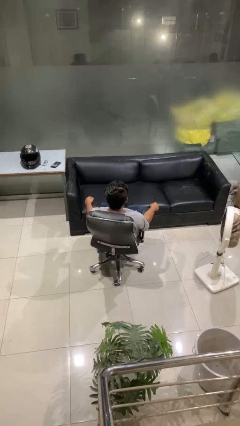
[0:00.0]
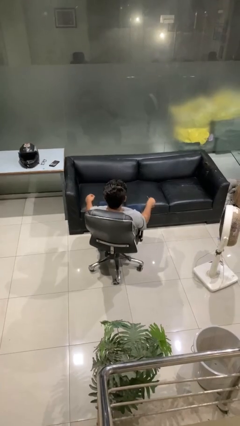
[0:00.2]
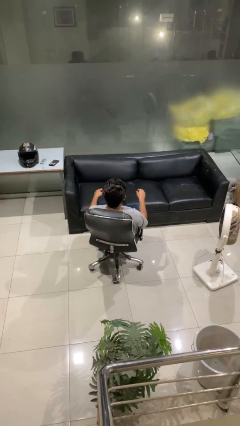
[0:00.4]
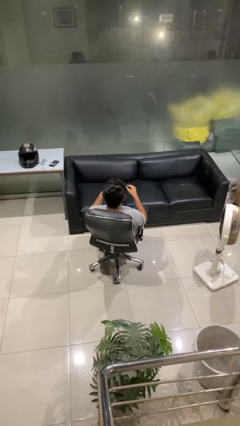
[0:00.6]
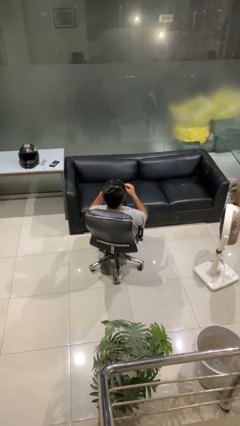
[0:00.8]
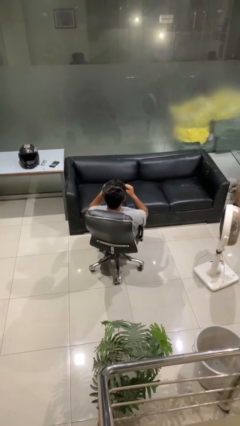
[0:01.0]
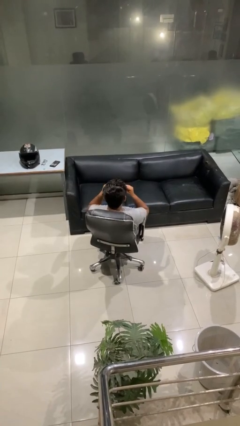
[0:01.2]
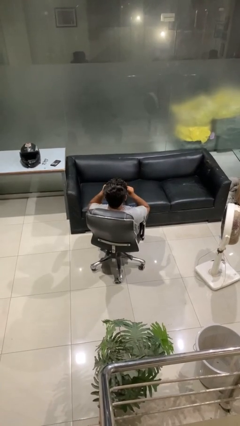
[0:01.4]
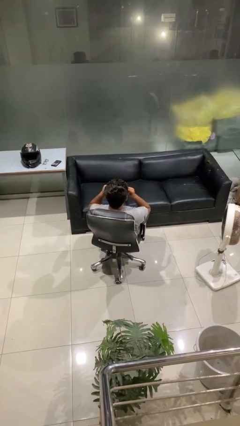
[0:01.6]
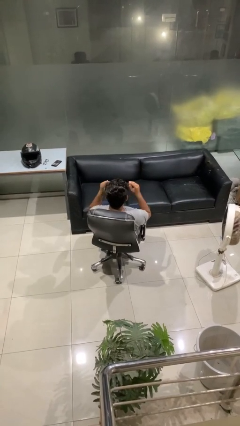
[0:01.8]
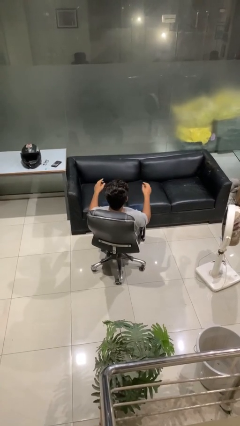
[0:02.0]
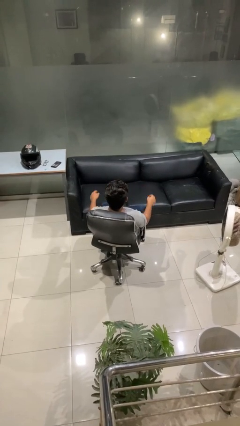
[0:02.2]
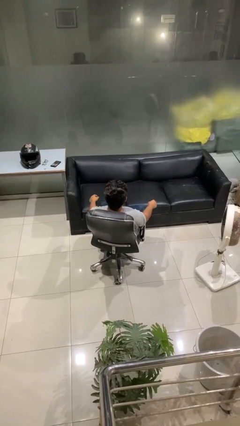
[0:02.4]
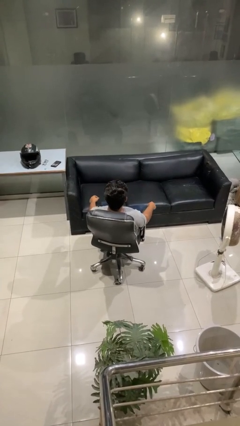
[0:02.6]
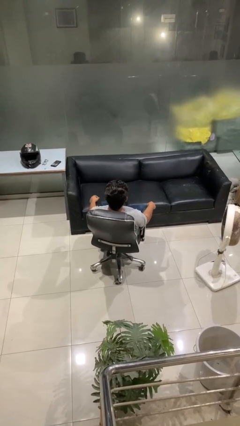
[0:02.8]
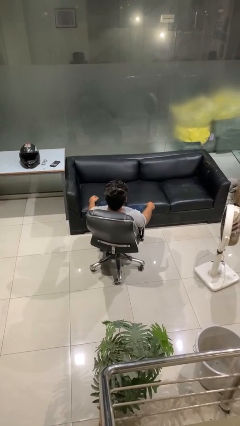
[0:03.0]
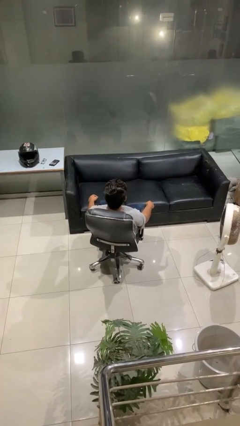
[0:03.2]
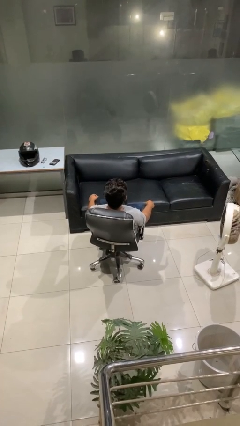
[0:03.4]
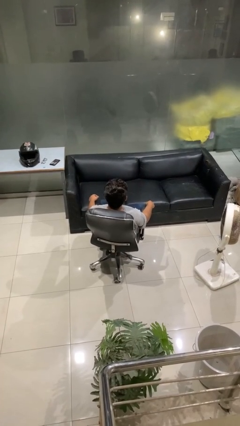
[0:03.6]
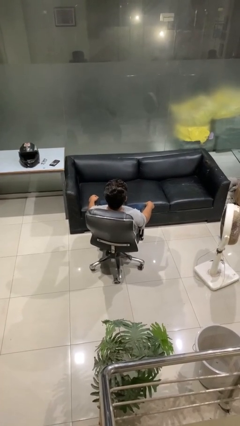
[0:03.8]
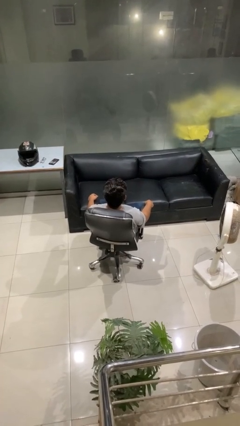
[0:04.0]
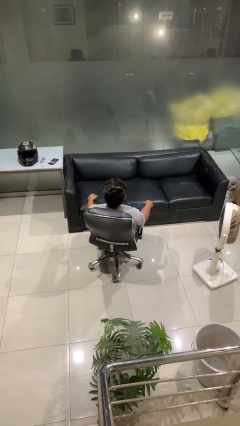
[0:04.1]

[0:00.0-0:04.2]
person puts on sunglasses

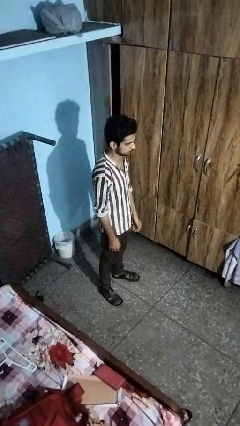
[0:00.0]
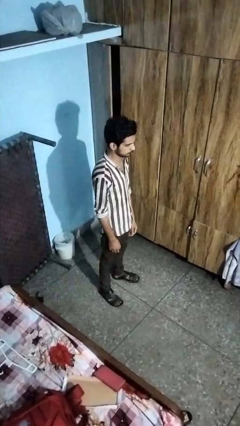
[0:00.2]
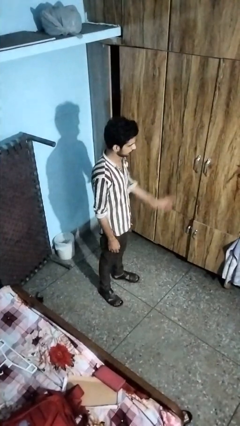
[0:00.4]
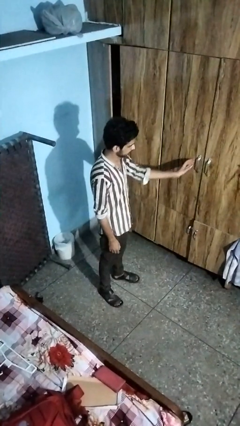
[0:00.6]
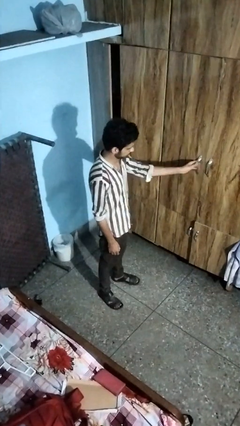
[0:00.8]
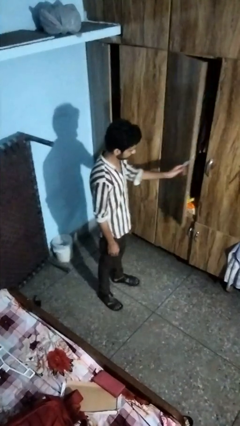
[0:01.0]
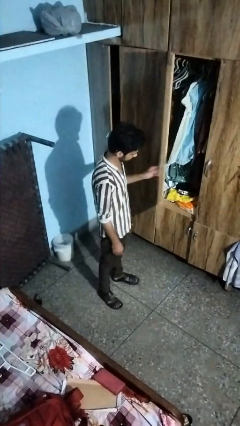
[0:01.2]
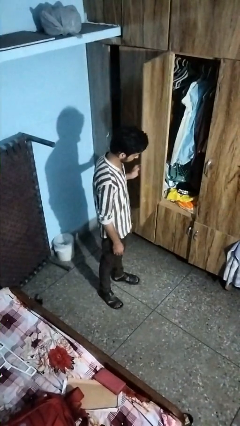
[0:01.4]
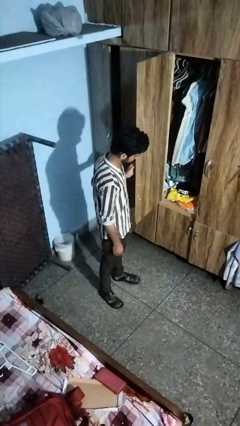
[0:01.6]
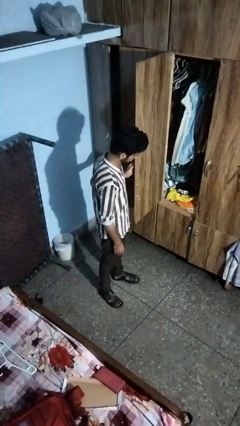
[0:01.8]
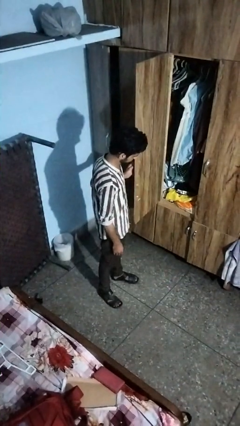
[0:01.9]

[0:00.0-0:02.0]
person opens closet door

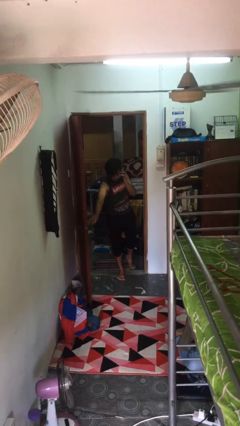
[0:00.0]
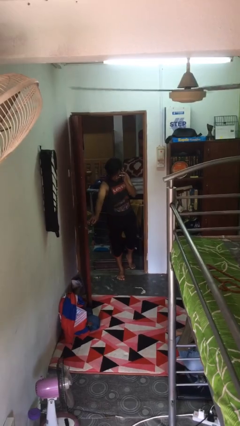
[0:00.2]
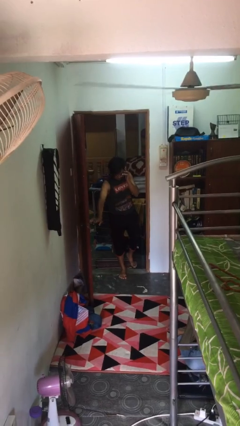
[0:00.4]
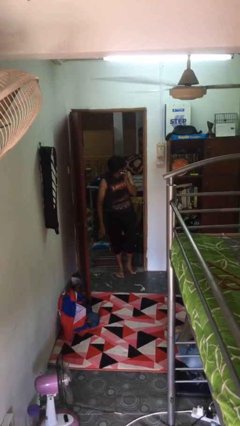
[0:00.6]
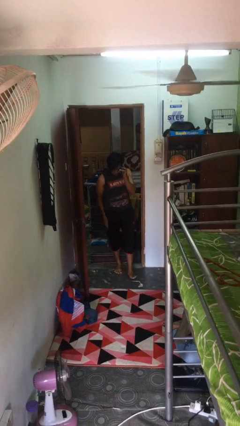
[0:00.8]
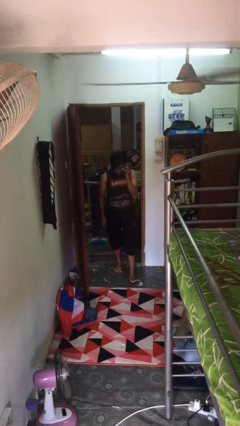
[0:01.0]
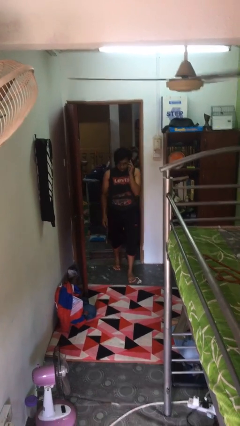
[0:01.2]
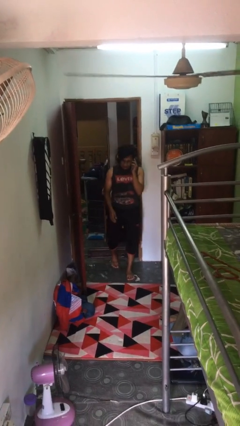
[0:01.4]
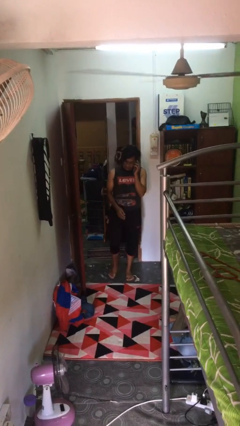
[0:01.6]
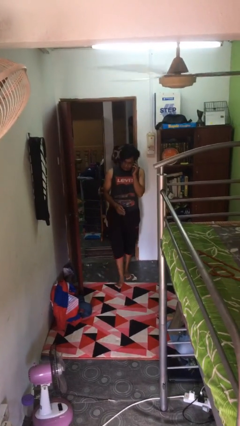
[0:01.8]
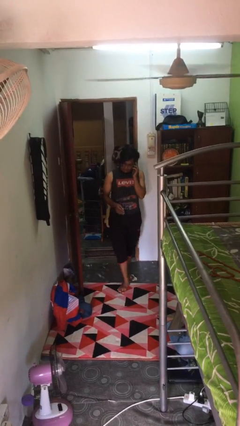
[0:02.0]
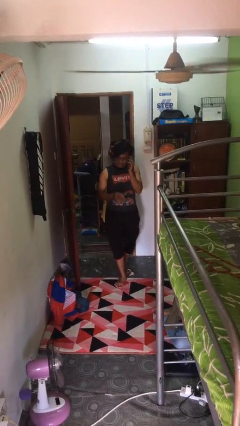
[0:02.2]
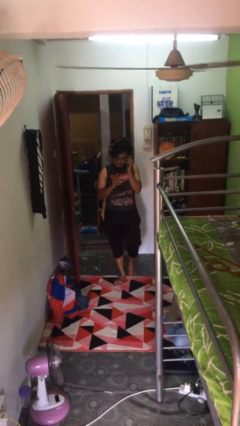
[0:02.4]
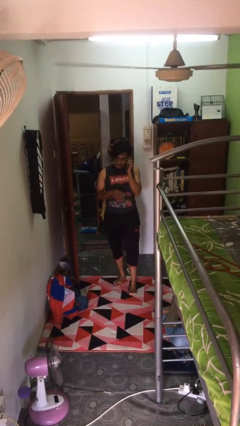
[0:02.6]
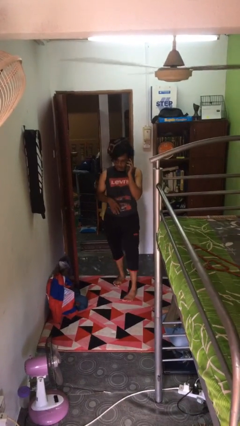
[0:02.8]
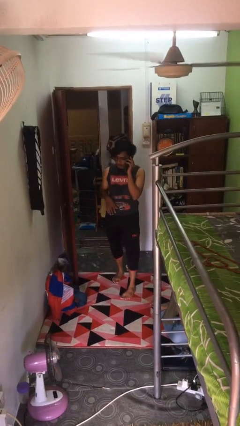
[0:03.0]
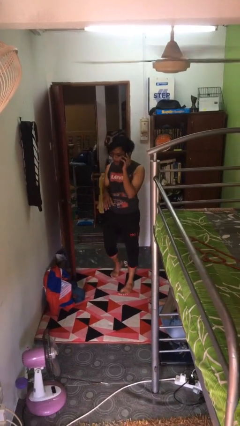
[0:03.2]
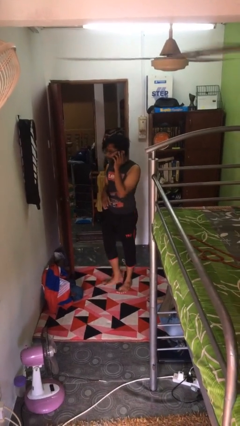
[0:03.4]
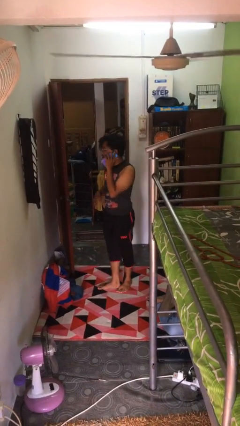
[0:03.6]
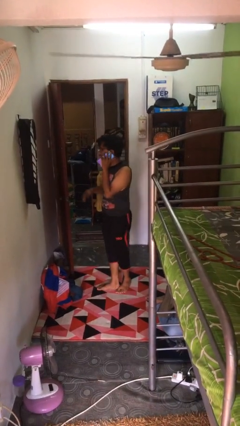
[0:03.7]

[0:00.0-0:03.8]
person enters scene through structure

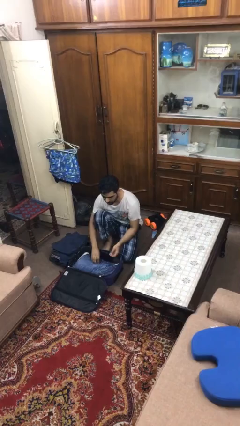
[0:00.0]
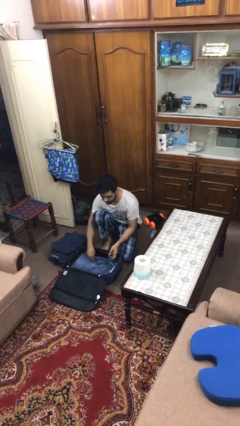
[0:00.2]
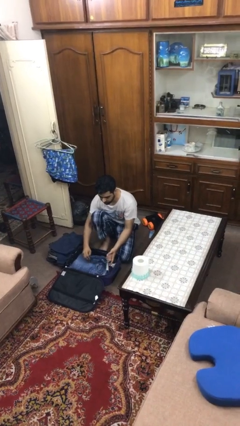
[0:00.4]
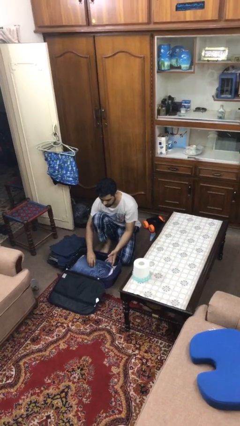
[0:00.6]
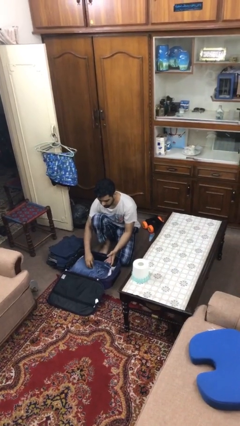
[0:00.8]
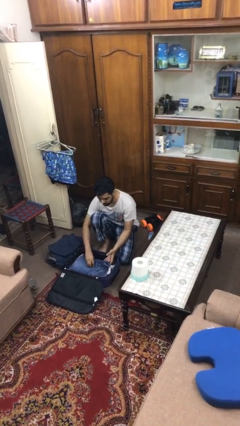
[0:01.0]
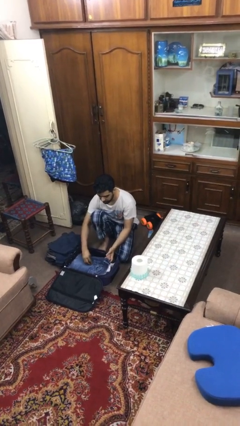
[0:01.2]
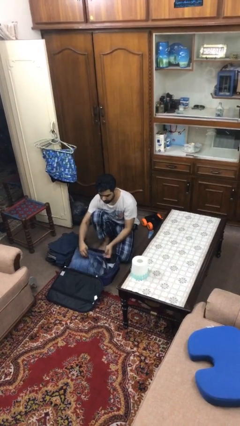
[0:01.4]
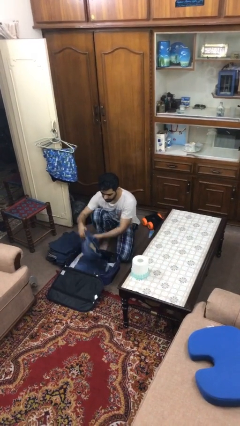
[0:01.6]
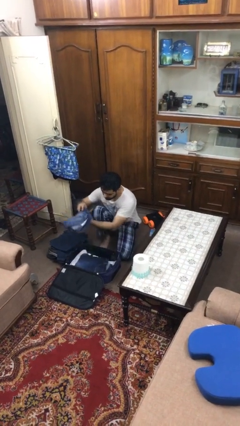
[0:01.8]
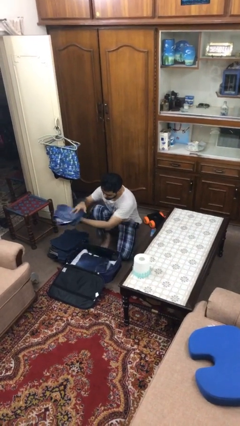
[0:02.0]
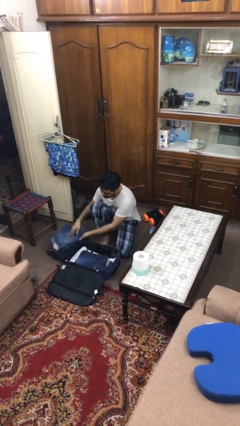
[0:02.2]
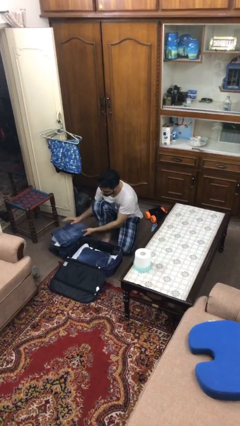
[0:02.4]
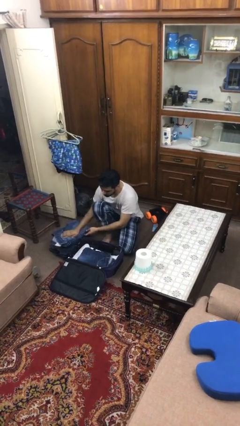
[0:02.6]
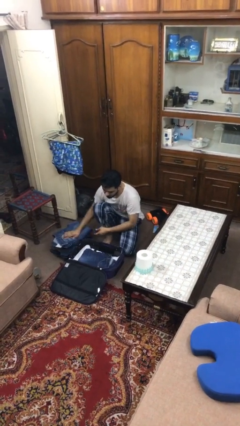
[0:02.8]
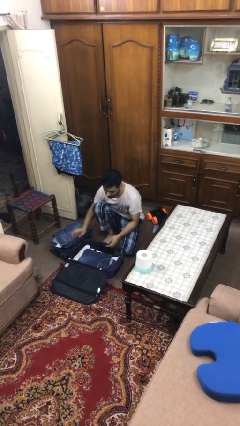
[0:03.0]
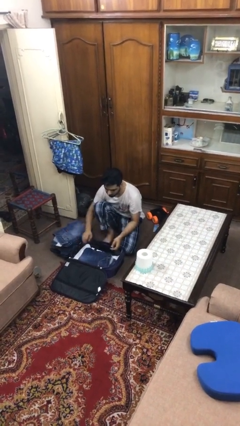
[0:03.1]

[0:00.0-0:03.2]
person unloads clothes from suitcase

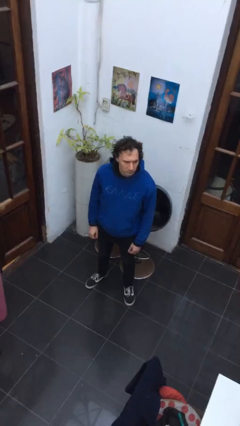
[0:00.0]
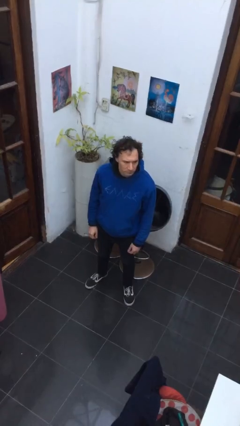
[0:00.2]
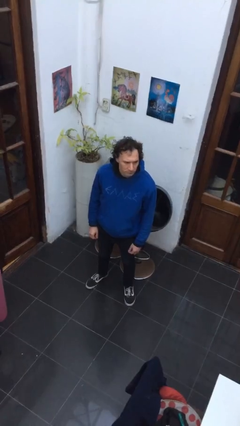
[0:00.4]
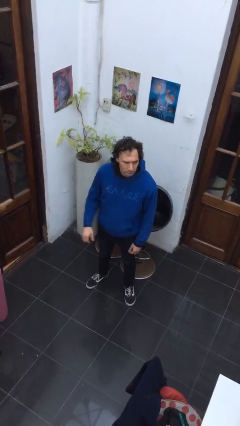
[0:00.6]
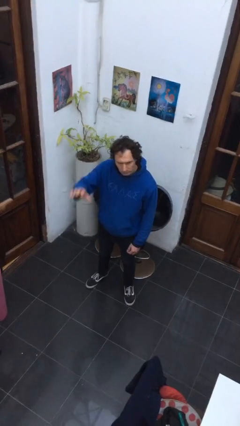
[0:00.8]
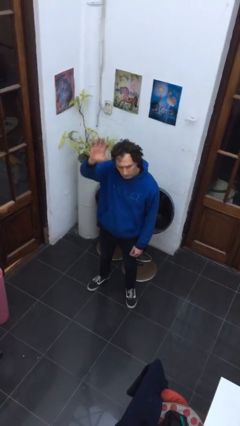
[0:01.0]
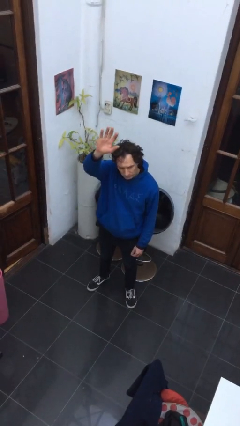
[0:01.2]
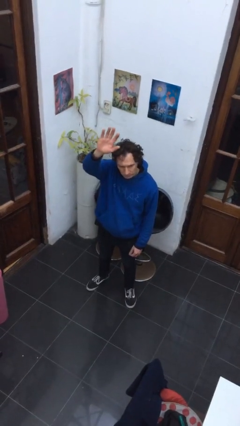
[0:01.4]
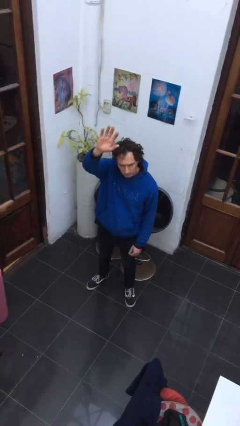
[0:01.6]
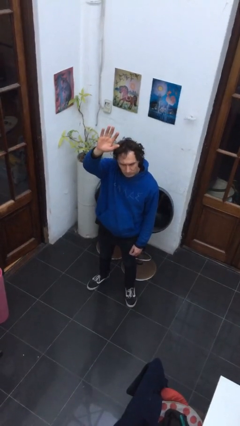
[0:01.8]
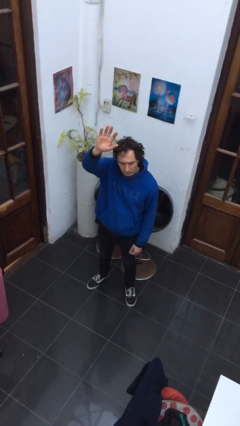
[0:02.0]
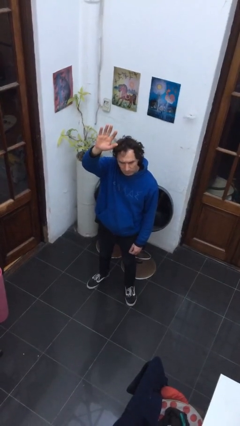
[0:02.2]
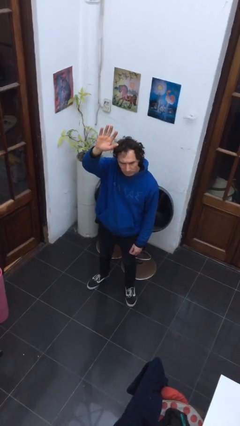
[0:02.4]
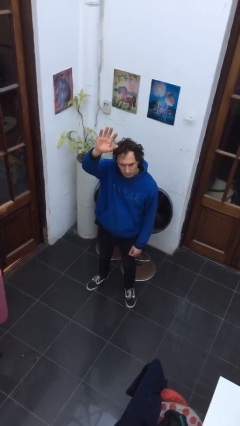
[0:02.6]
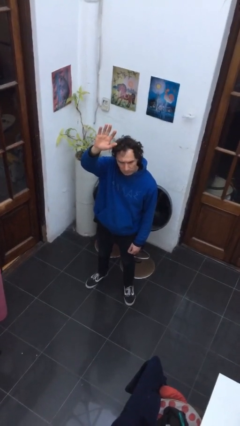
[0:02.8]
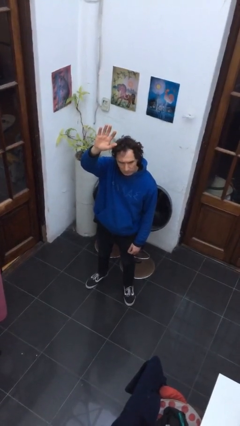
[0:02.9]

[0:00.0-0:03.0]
person gestures raise hand

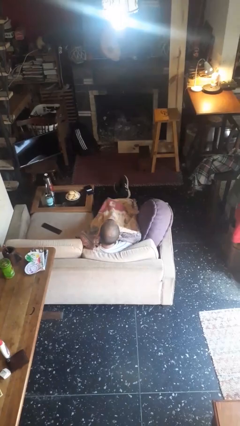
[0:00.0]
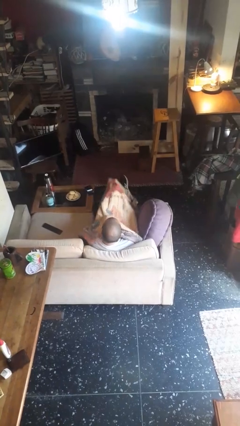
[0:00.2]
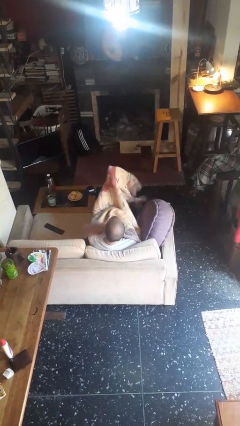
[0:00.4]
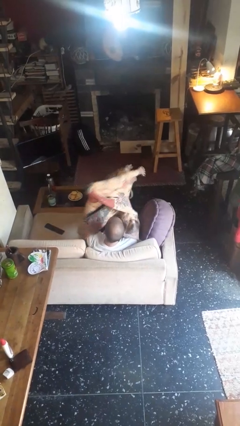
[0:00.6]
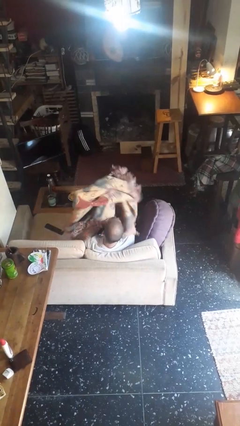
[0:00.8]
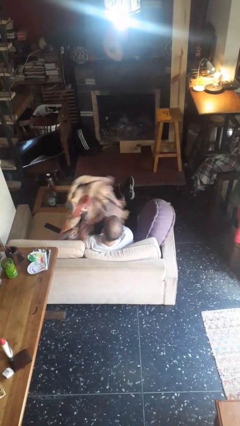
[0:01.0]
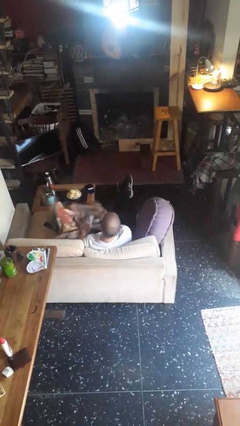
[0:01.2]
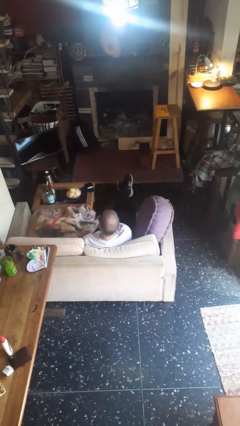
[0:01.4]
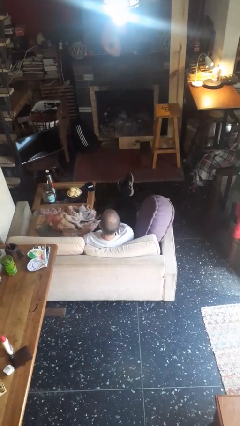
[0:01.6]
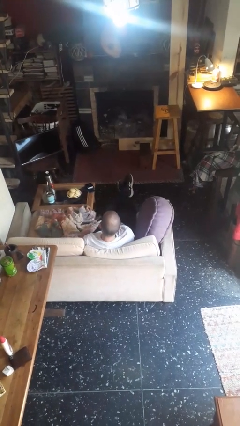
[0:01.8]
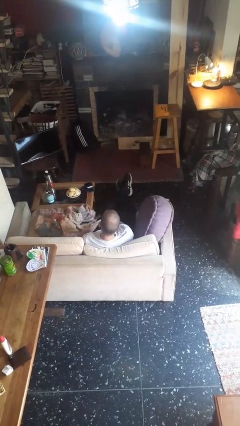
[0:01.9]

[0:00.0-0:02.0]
person uncovers with blanket
